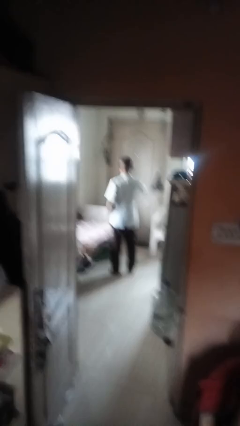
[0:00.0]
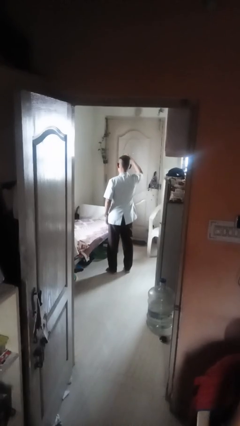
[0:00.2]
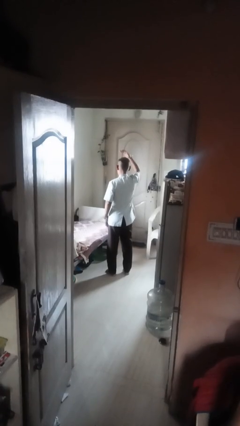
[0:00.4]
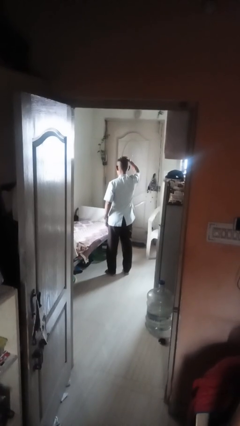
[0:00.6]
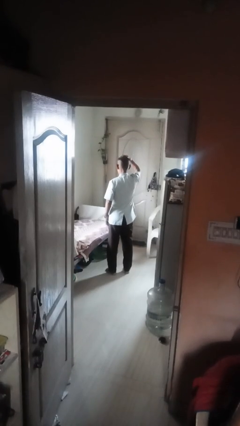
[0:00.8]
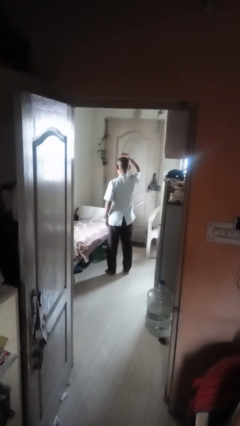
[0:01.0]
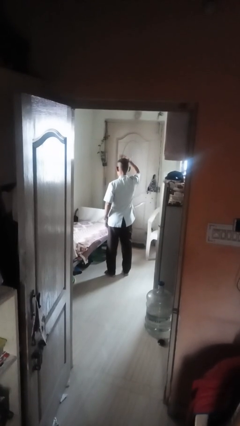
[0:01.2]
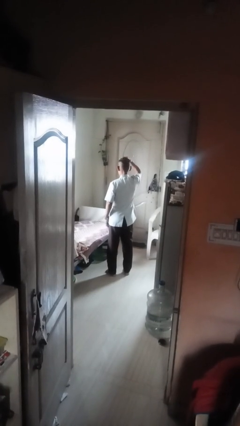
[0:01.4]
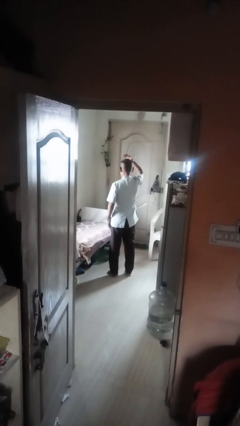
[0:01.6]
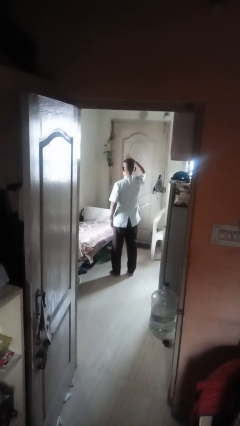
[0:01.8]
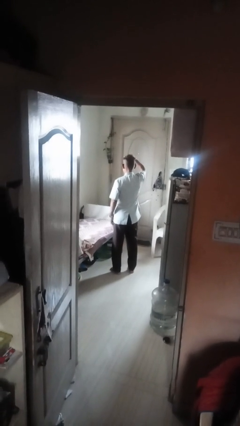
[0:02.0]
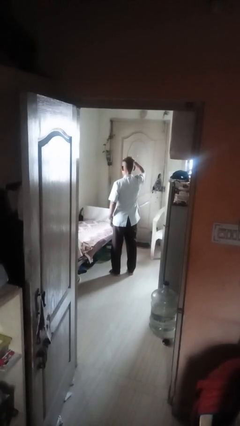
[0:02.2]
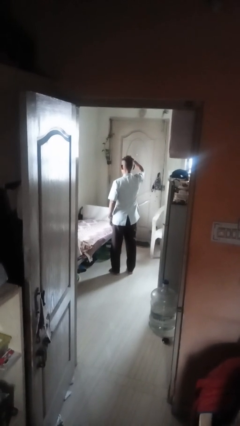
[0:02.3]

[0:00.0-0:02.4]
person pats head

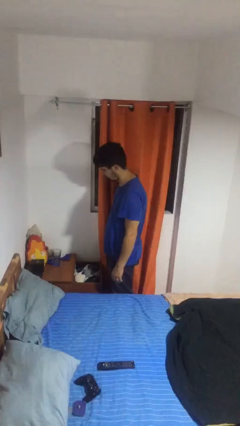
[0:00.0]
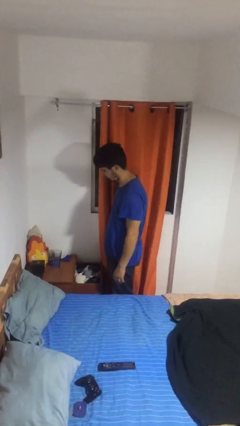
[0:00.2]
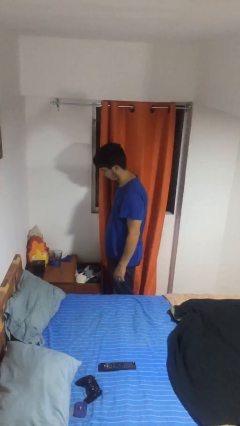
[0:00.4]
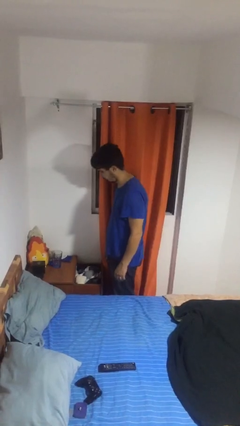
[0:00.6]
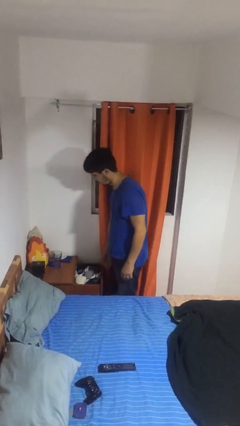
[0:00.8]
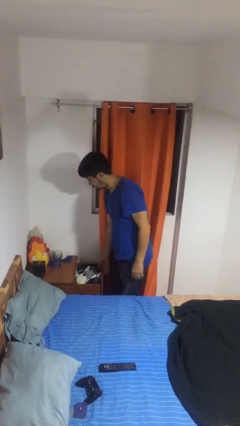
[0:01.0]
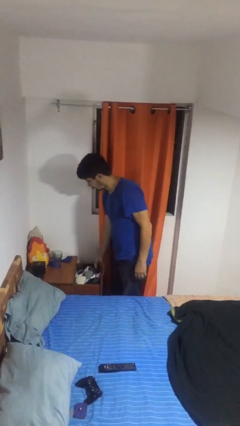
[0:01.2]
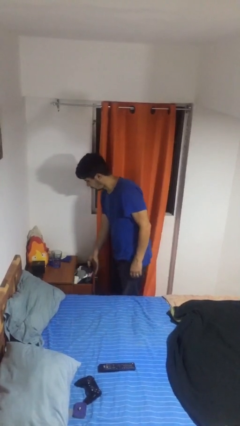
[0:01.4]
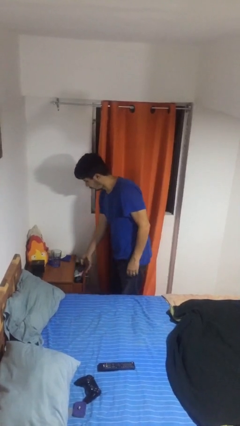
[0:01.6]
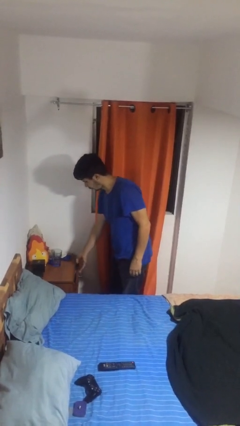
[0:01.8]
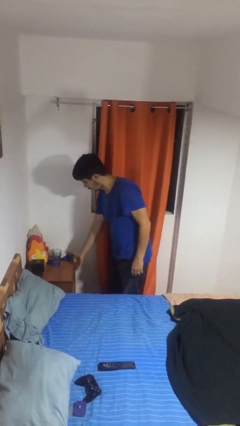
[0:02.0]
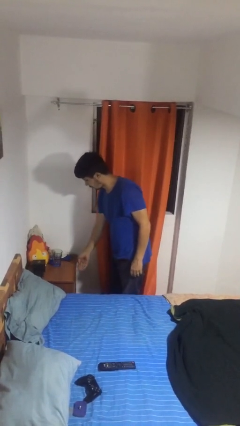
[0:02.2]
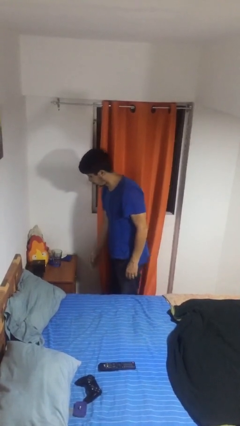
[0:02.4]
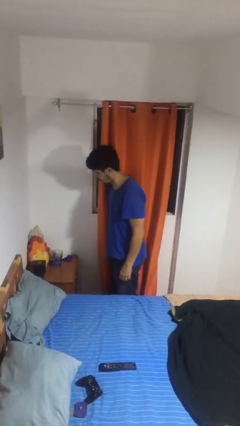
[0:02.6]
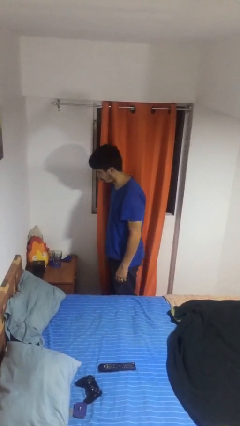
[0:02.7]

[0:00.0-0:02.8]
person closes dresser drawer

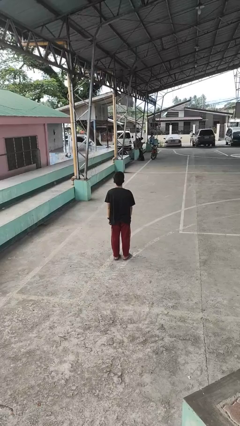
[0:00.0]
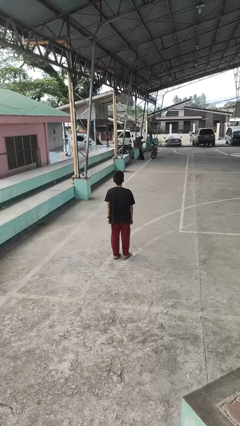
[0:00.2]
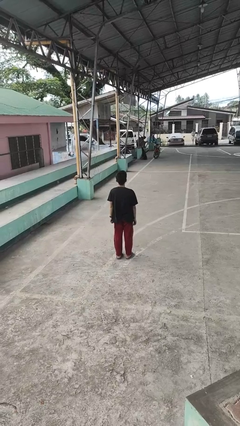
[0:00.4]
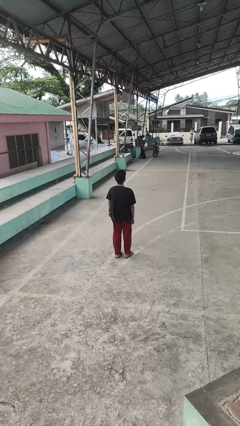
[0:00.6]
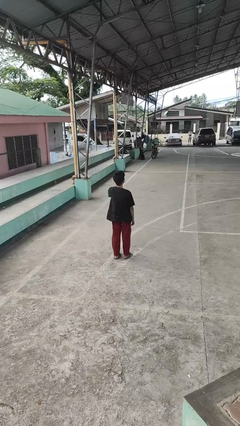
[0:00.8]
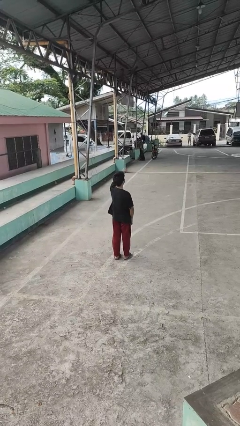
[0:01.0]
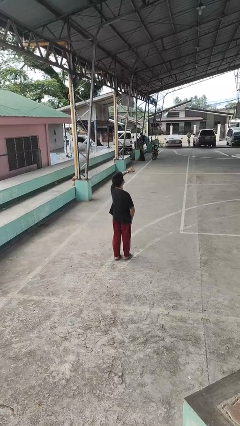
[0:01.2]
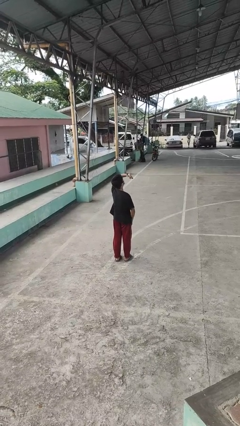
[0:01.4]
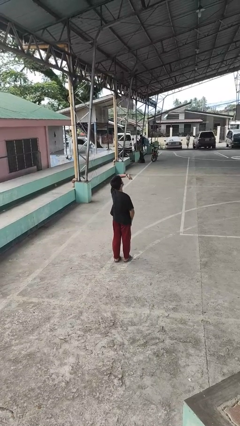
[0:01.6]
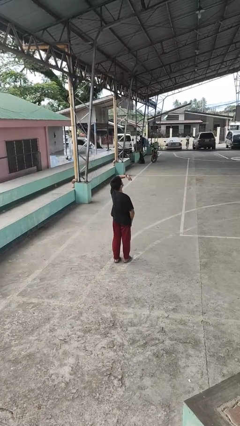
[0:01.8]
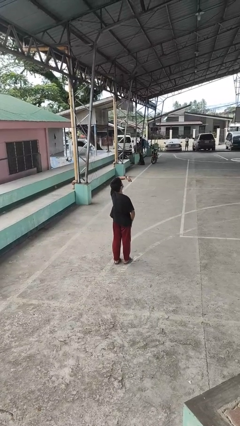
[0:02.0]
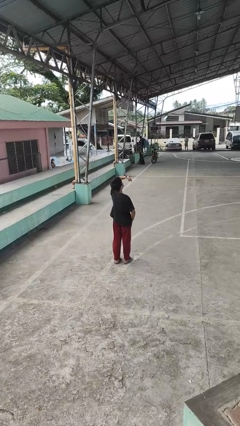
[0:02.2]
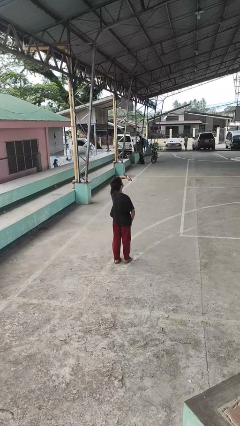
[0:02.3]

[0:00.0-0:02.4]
person looks at wristwatch

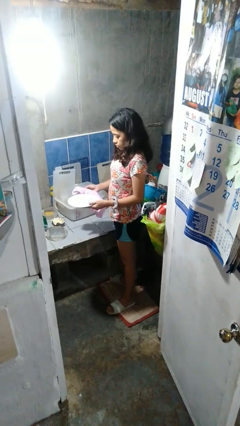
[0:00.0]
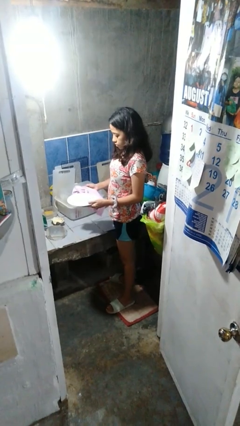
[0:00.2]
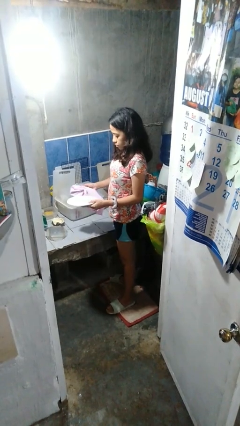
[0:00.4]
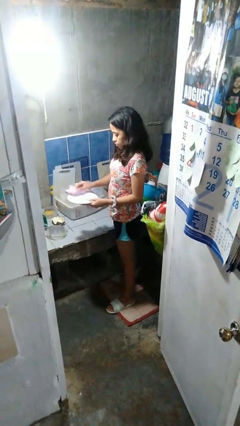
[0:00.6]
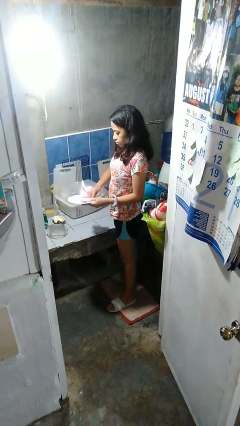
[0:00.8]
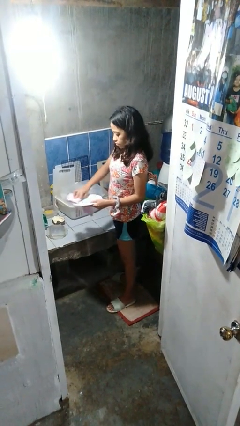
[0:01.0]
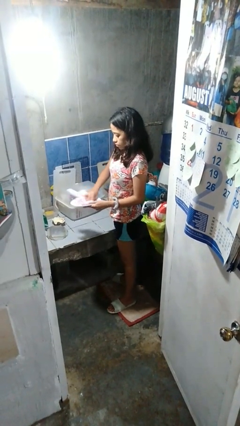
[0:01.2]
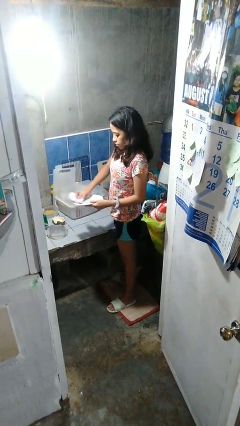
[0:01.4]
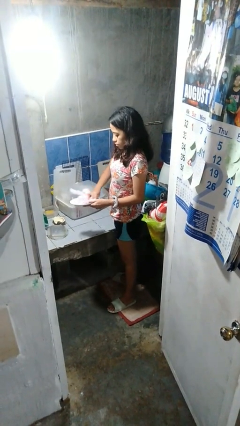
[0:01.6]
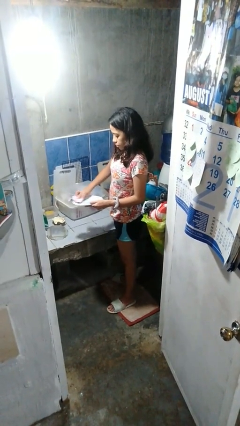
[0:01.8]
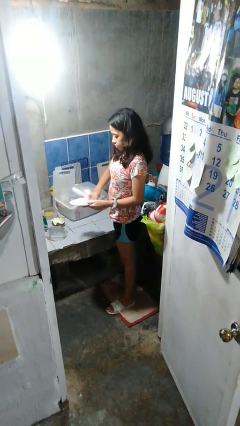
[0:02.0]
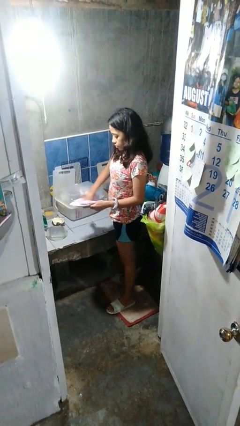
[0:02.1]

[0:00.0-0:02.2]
person dries dish

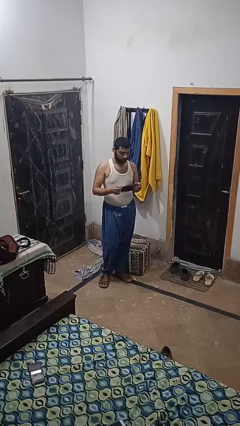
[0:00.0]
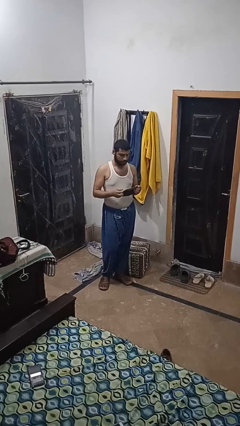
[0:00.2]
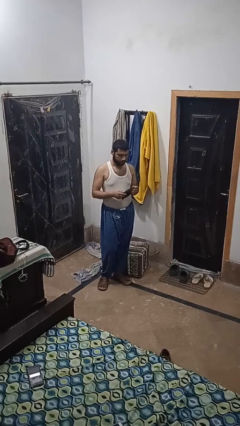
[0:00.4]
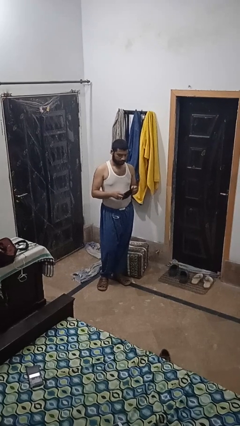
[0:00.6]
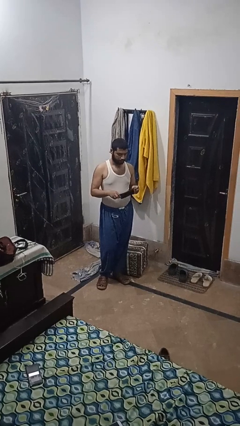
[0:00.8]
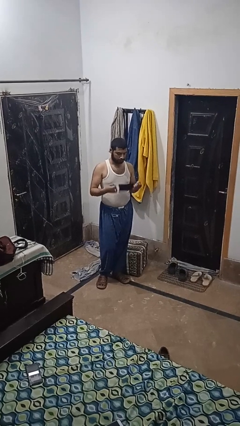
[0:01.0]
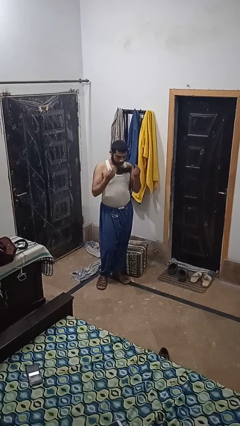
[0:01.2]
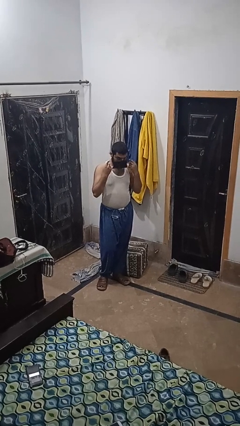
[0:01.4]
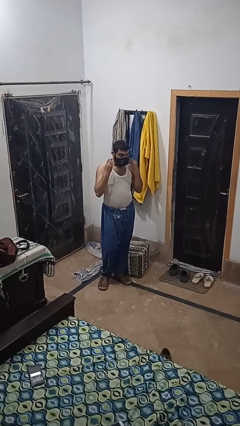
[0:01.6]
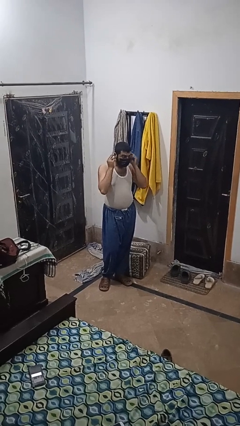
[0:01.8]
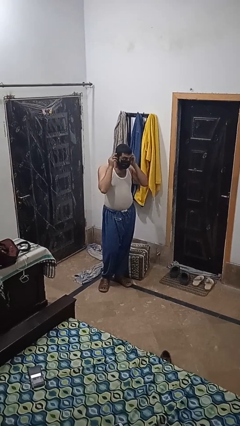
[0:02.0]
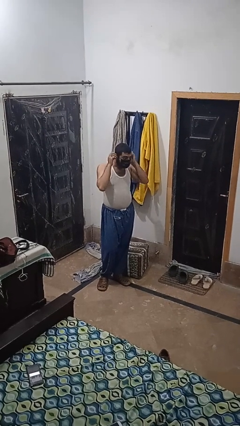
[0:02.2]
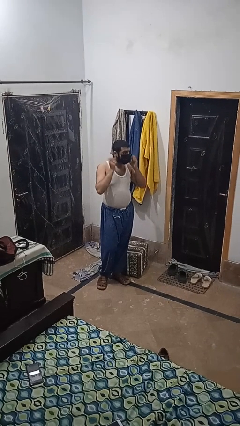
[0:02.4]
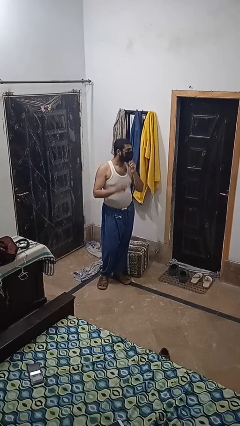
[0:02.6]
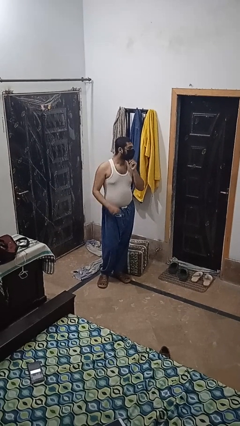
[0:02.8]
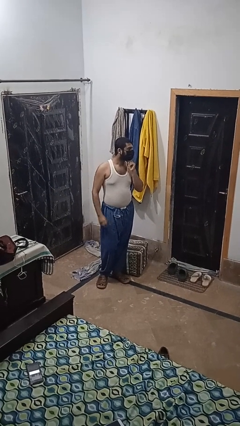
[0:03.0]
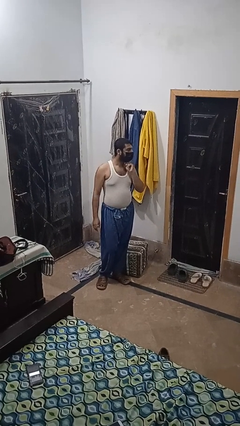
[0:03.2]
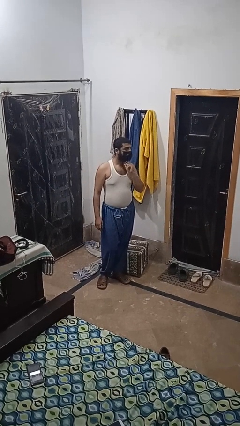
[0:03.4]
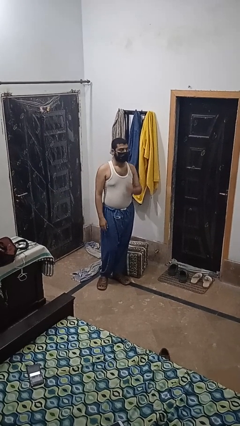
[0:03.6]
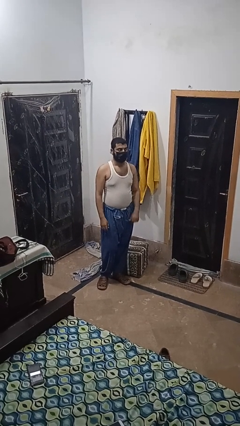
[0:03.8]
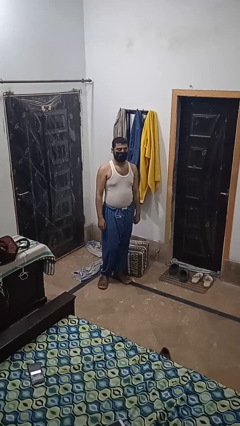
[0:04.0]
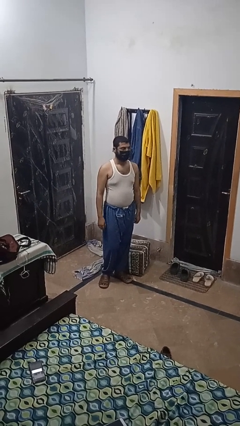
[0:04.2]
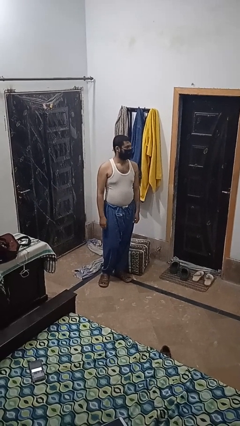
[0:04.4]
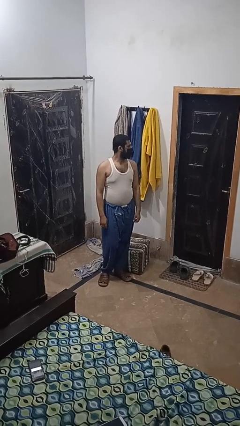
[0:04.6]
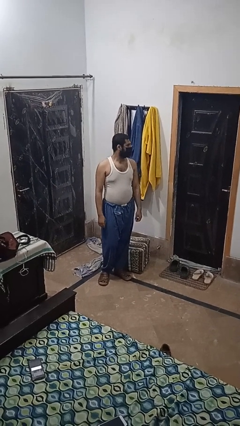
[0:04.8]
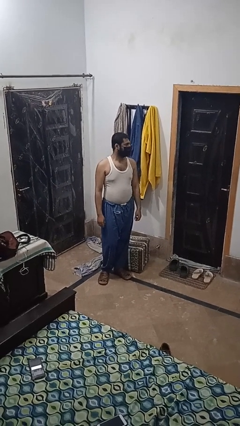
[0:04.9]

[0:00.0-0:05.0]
person puts on facemask

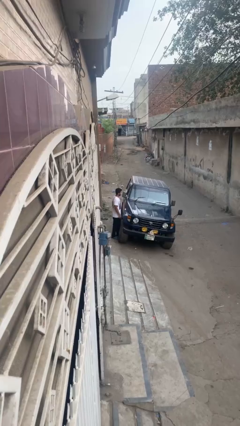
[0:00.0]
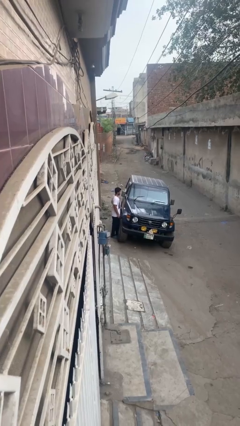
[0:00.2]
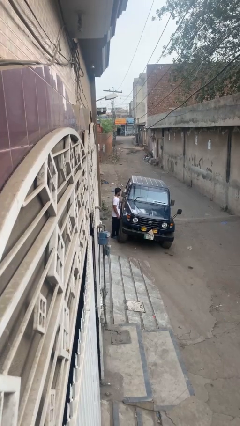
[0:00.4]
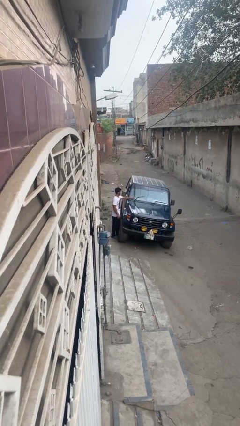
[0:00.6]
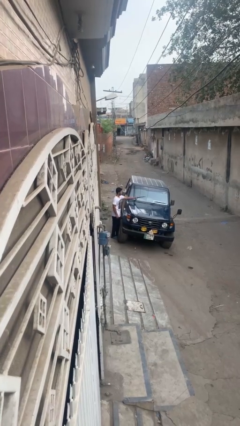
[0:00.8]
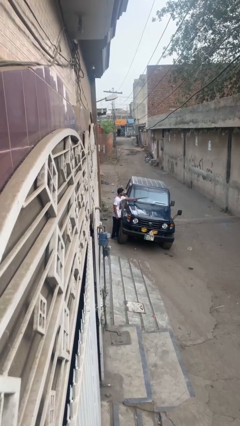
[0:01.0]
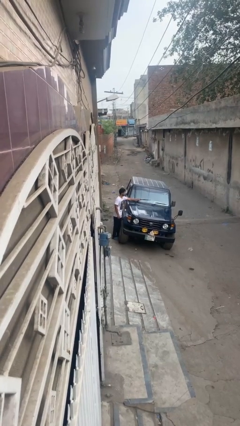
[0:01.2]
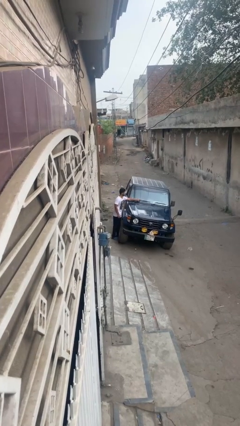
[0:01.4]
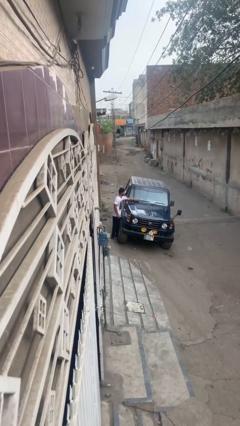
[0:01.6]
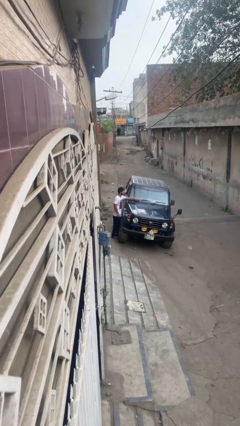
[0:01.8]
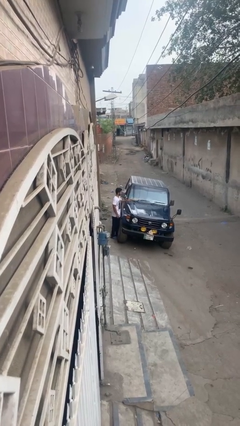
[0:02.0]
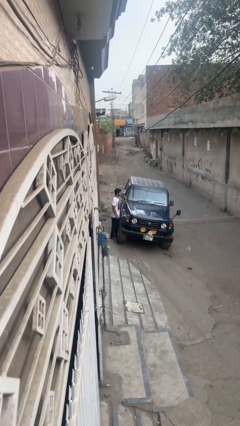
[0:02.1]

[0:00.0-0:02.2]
person flips down car wipers

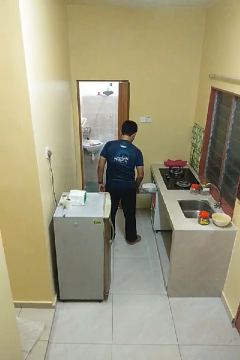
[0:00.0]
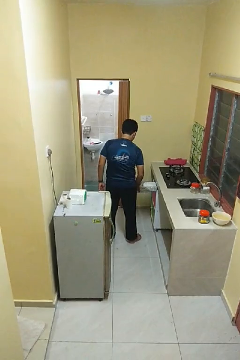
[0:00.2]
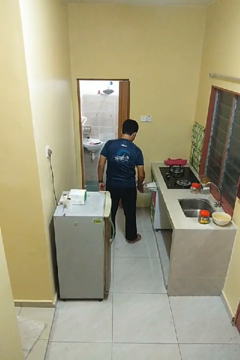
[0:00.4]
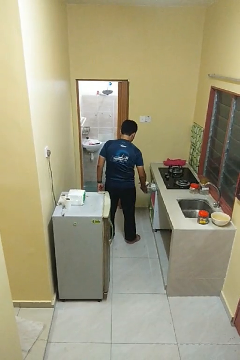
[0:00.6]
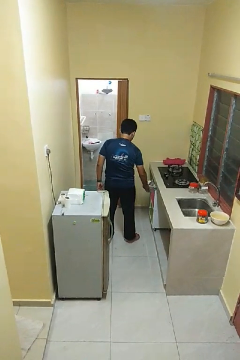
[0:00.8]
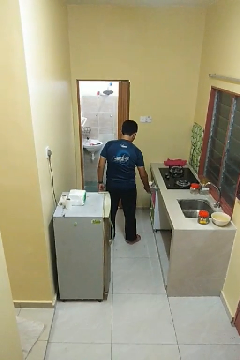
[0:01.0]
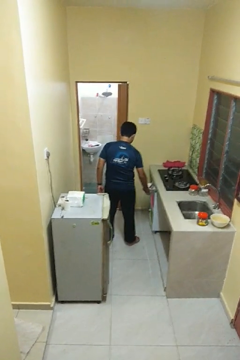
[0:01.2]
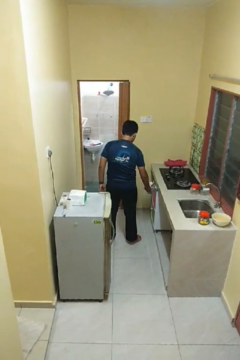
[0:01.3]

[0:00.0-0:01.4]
person closes kitchen drawer
